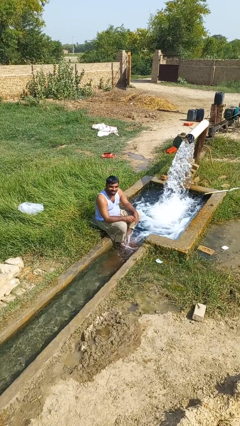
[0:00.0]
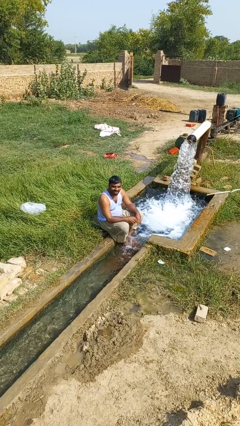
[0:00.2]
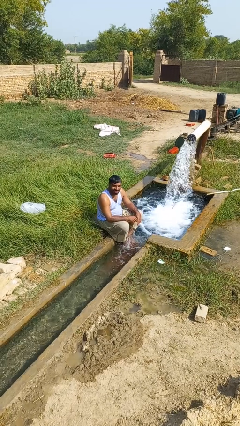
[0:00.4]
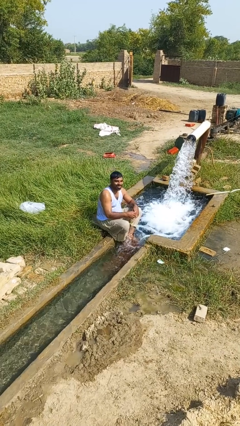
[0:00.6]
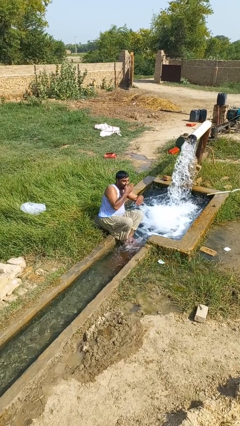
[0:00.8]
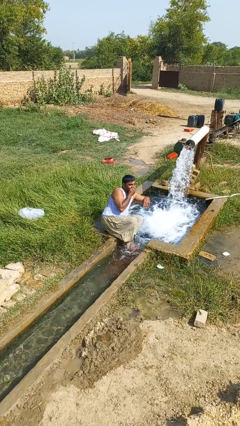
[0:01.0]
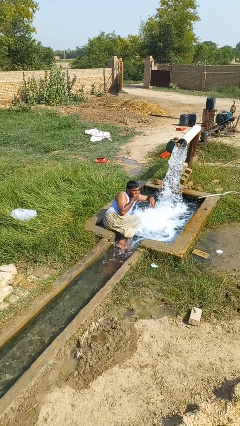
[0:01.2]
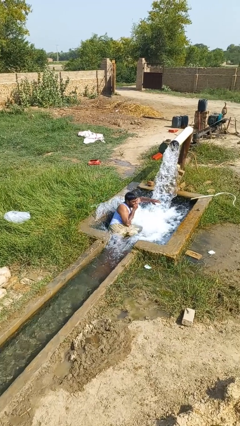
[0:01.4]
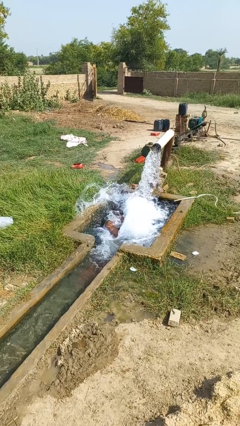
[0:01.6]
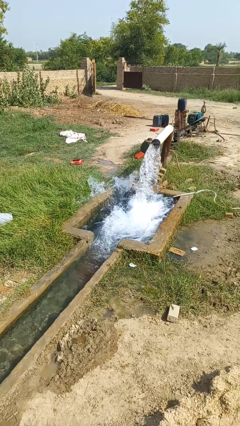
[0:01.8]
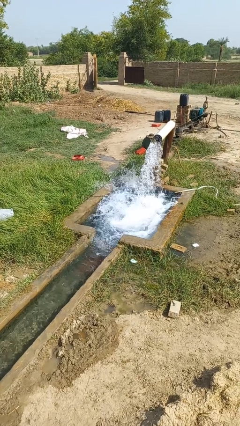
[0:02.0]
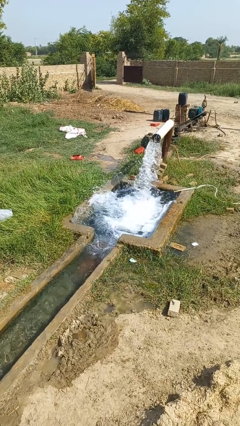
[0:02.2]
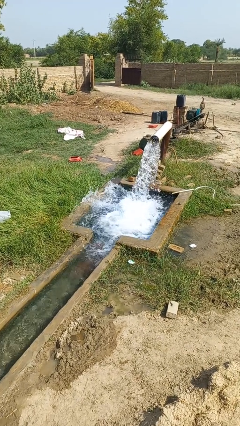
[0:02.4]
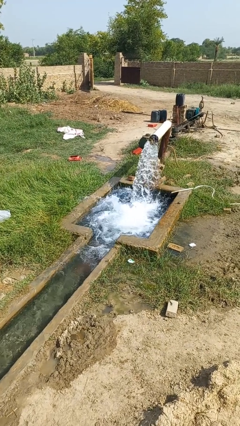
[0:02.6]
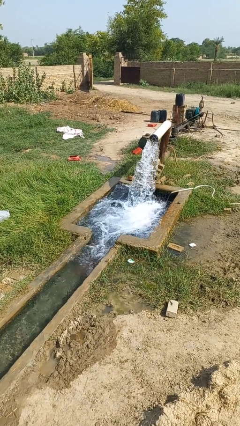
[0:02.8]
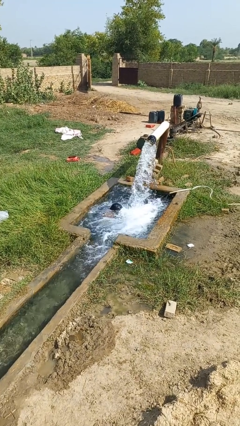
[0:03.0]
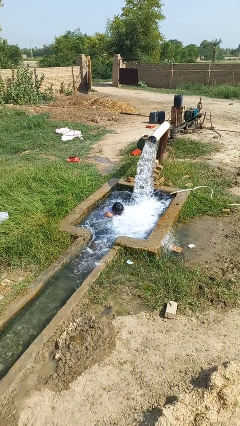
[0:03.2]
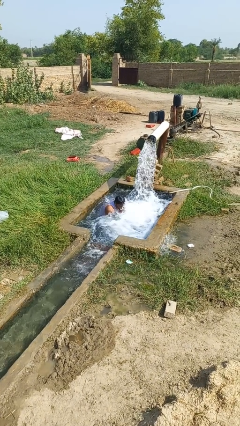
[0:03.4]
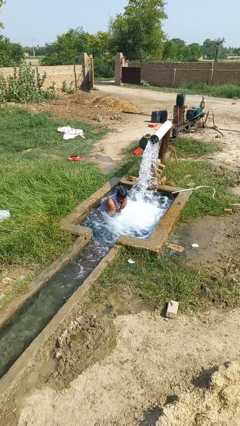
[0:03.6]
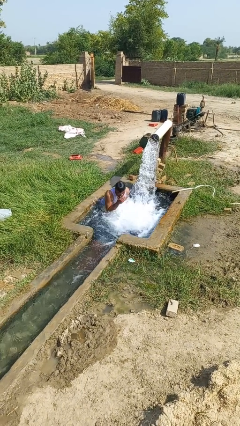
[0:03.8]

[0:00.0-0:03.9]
person falls into pool

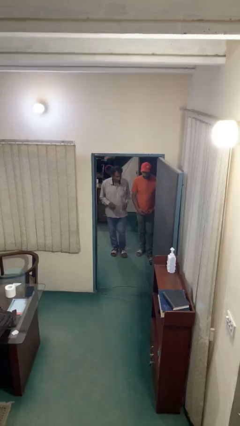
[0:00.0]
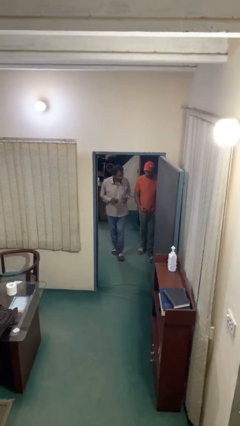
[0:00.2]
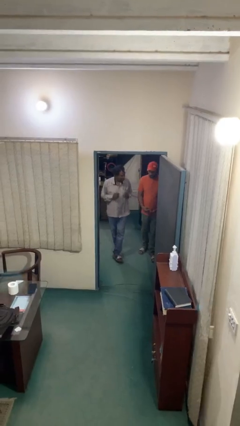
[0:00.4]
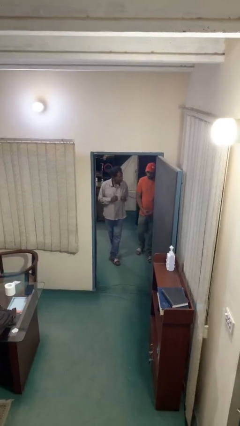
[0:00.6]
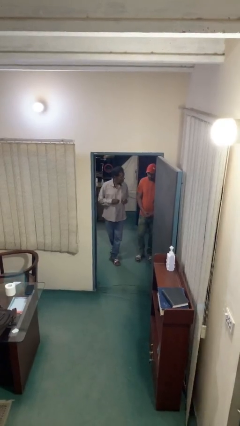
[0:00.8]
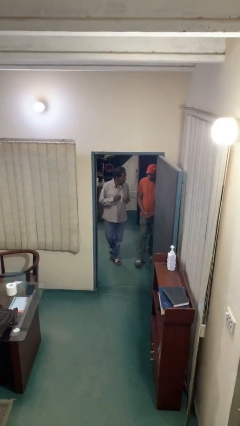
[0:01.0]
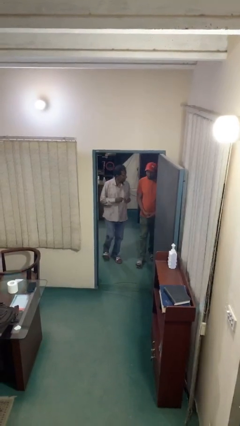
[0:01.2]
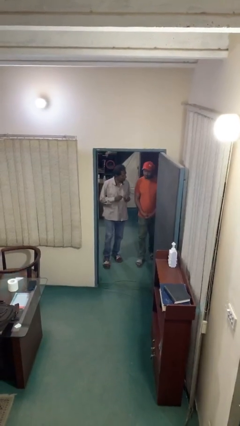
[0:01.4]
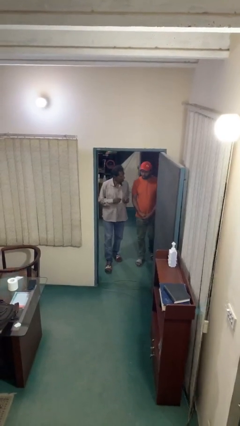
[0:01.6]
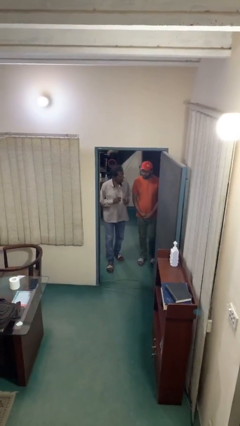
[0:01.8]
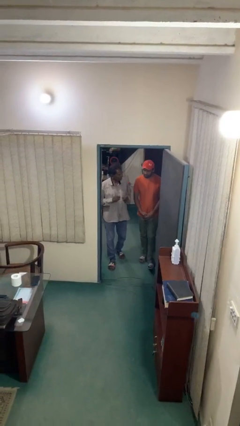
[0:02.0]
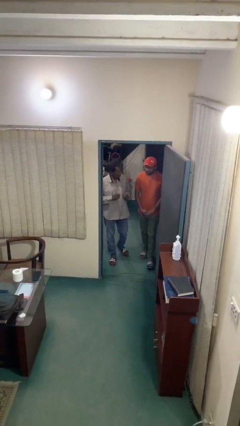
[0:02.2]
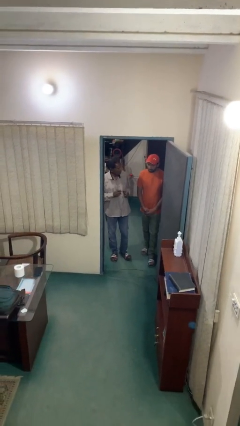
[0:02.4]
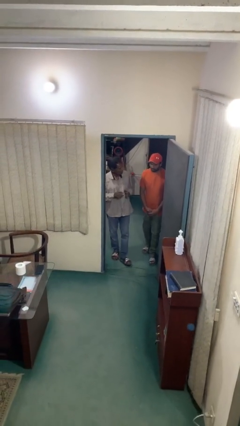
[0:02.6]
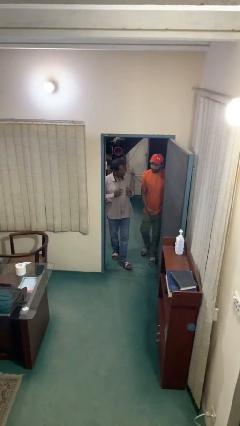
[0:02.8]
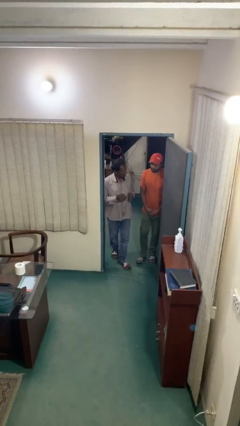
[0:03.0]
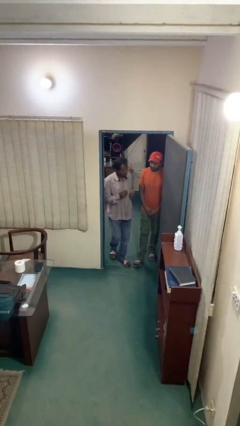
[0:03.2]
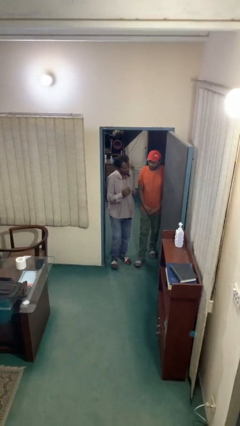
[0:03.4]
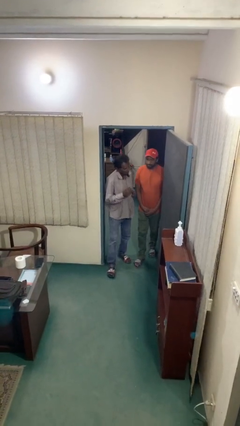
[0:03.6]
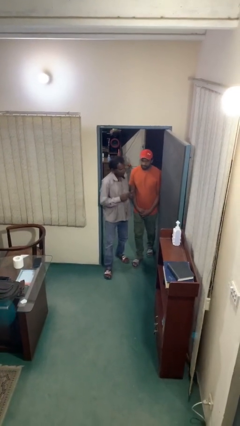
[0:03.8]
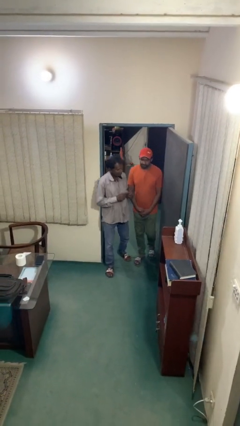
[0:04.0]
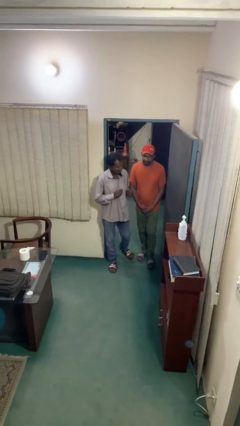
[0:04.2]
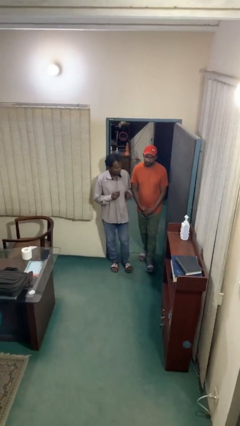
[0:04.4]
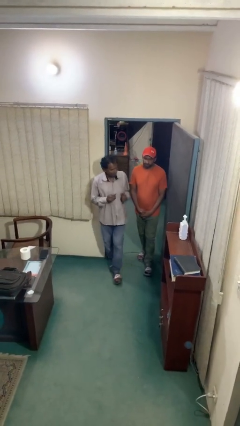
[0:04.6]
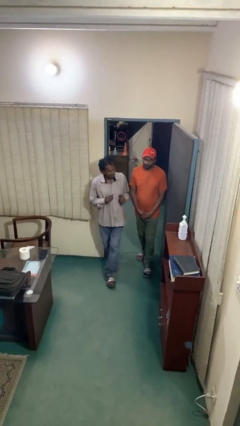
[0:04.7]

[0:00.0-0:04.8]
person talks to person

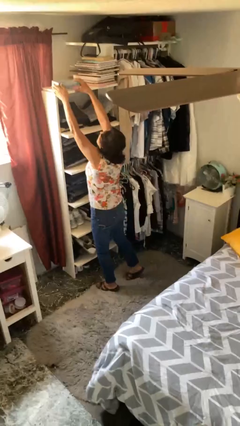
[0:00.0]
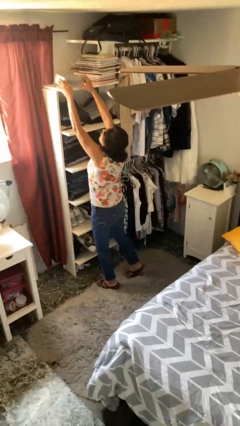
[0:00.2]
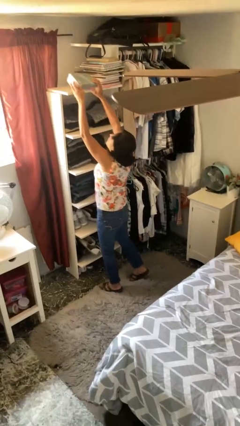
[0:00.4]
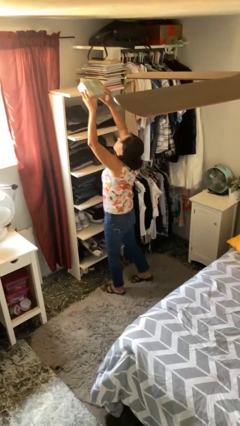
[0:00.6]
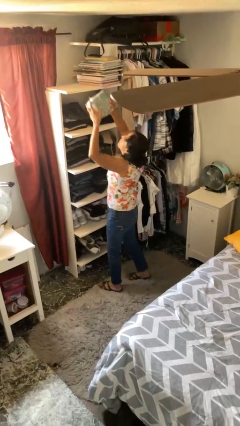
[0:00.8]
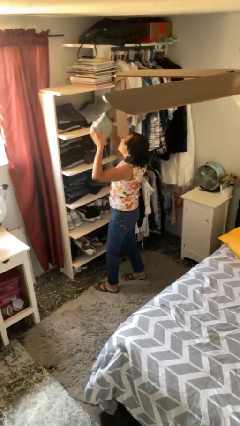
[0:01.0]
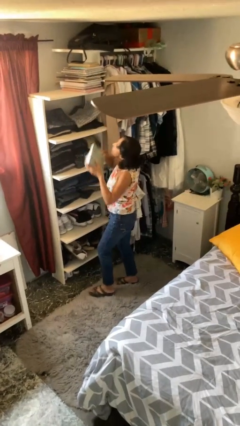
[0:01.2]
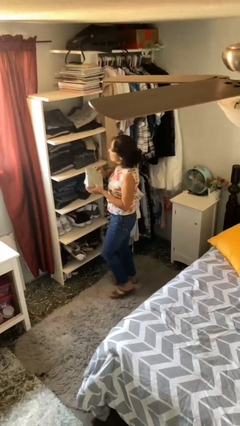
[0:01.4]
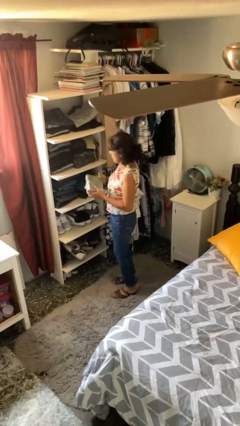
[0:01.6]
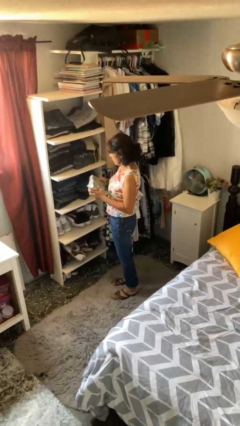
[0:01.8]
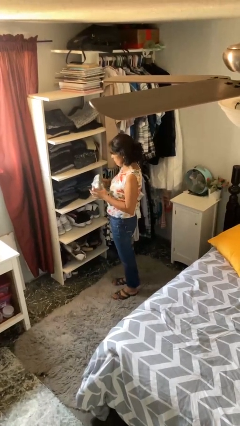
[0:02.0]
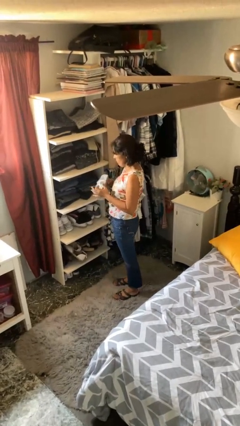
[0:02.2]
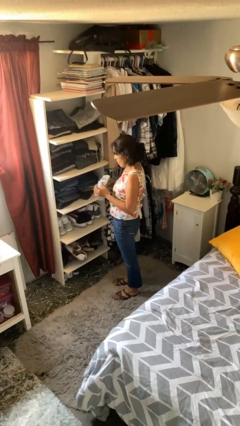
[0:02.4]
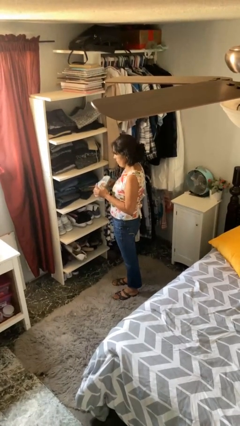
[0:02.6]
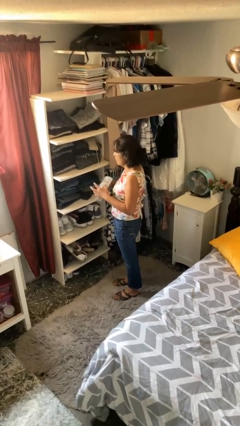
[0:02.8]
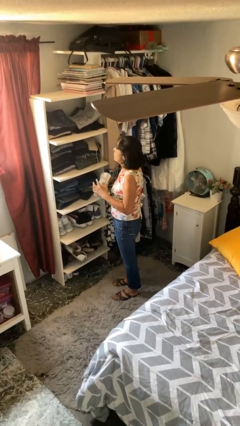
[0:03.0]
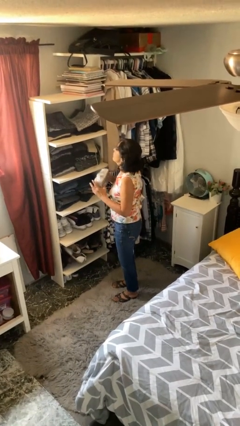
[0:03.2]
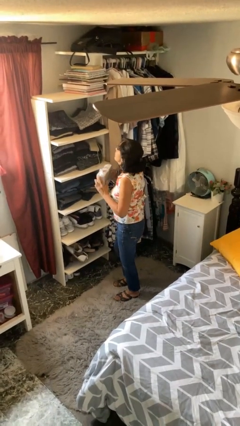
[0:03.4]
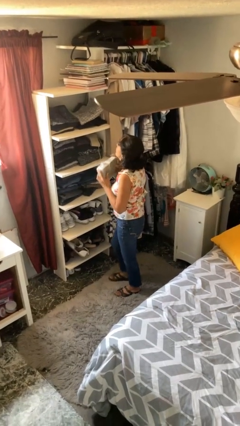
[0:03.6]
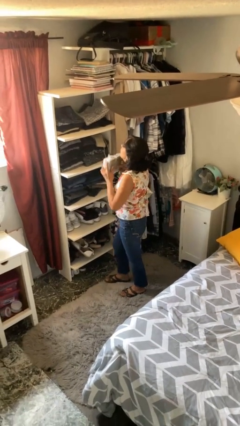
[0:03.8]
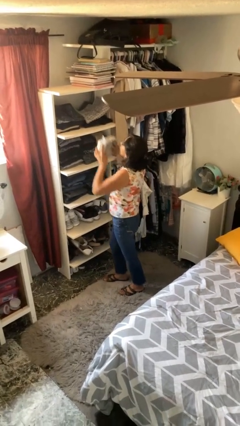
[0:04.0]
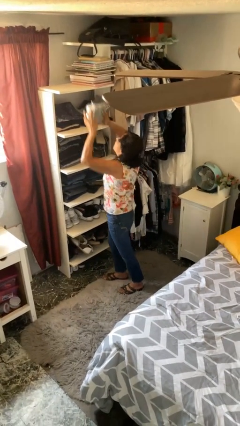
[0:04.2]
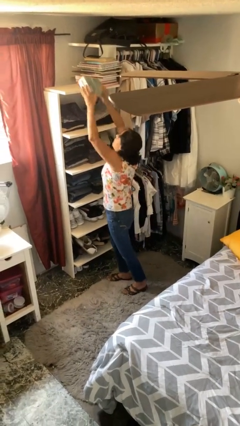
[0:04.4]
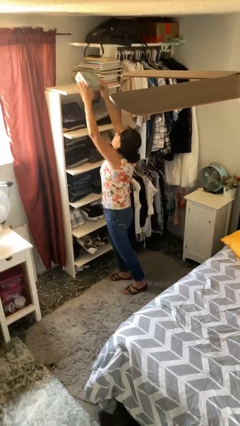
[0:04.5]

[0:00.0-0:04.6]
person picks up object from shelf

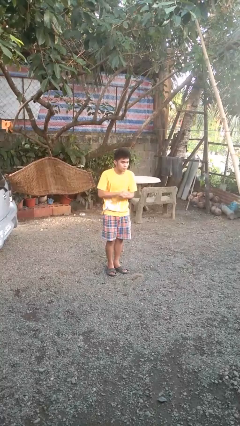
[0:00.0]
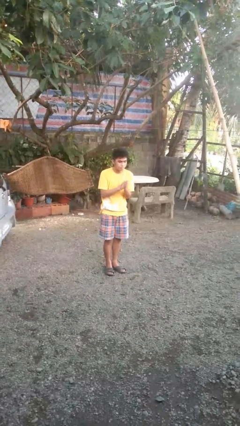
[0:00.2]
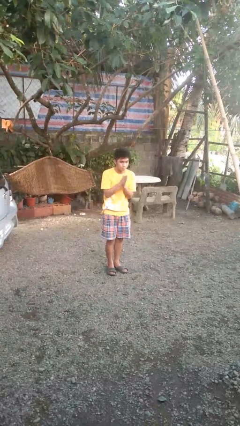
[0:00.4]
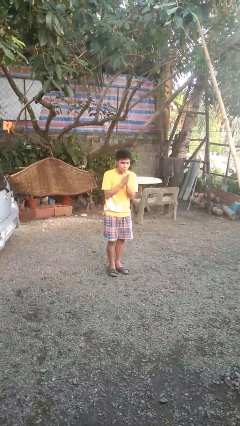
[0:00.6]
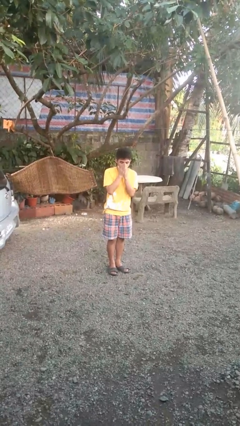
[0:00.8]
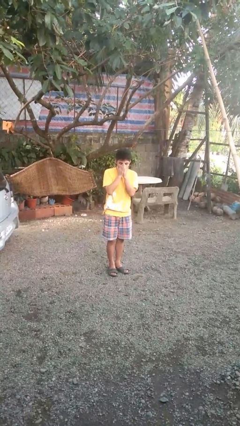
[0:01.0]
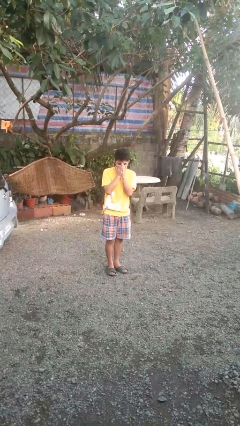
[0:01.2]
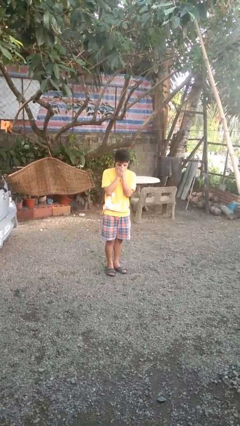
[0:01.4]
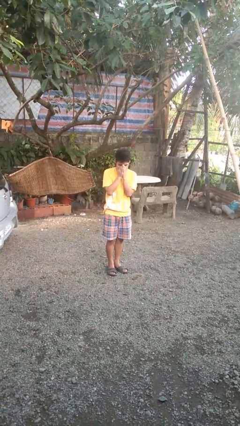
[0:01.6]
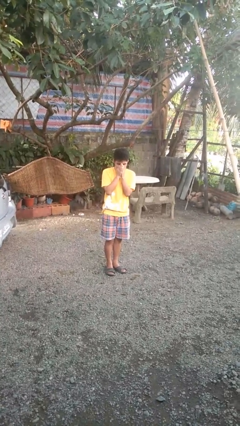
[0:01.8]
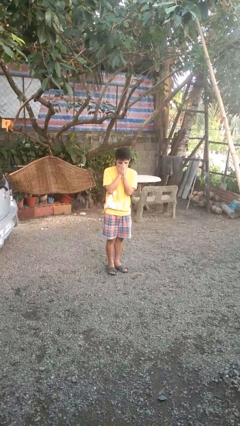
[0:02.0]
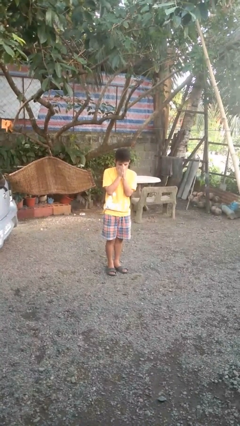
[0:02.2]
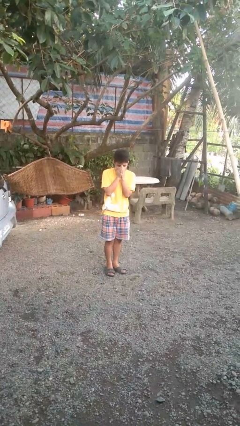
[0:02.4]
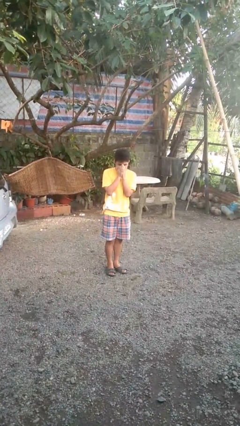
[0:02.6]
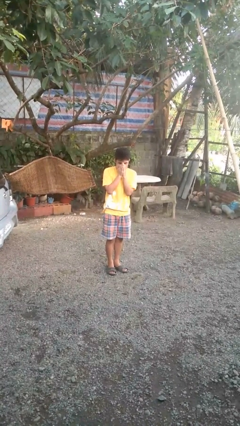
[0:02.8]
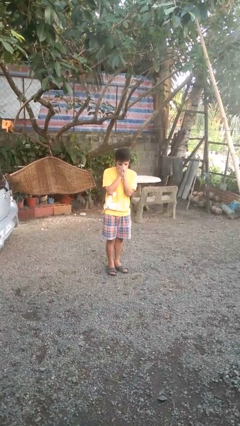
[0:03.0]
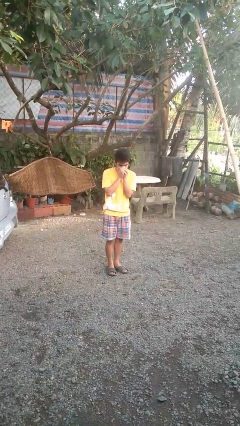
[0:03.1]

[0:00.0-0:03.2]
person blows into hands

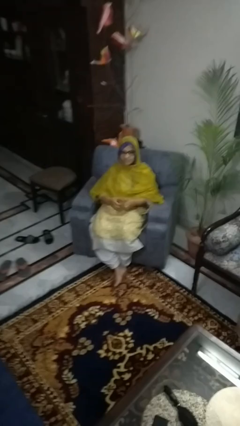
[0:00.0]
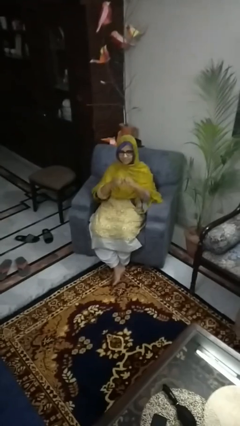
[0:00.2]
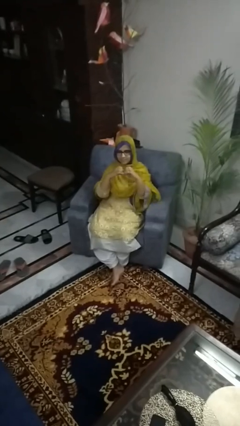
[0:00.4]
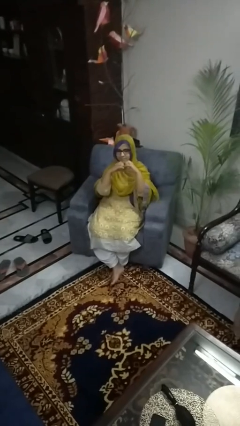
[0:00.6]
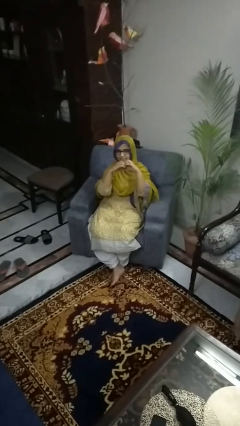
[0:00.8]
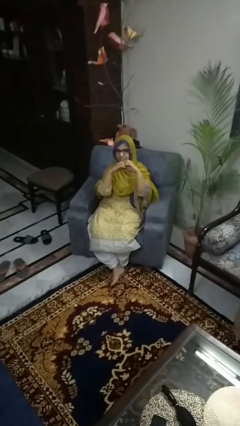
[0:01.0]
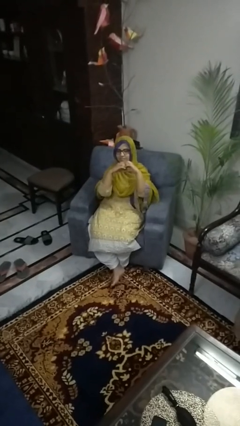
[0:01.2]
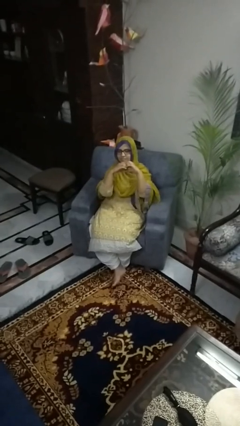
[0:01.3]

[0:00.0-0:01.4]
person gestures heart
